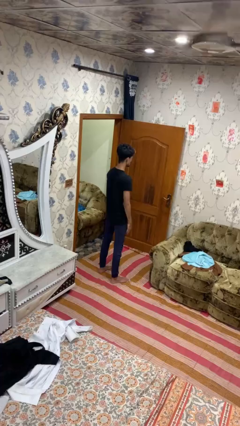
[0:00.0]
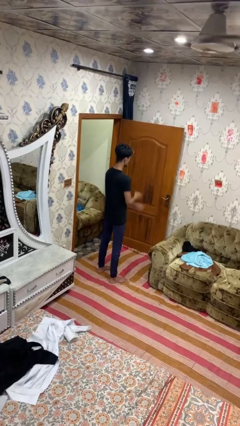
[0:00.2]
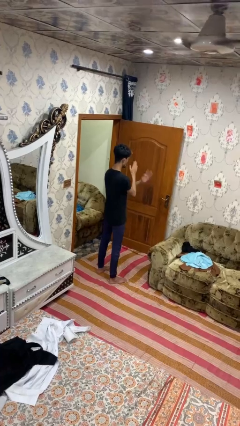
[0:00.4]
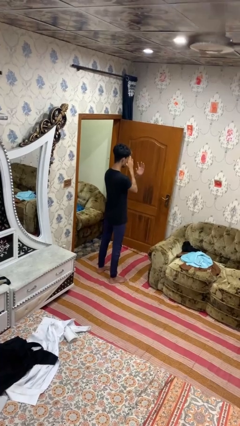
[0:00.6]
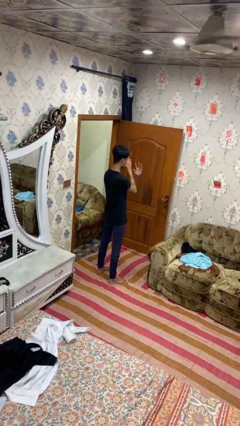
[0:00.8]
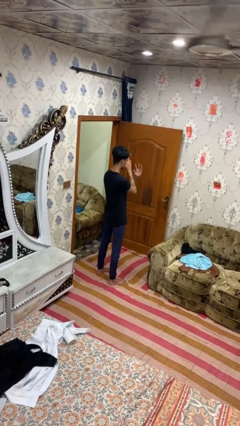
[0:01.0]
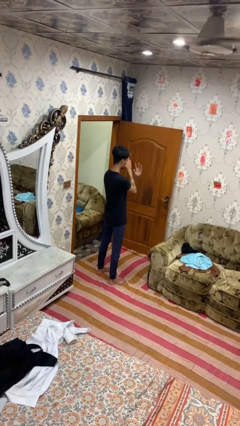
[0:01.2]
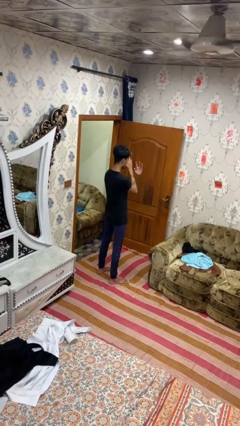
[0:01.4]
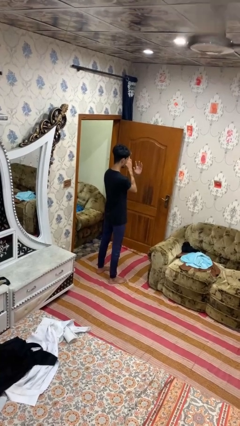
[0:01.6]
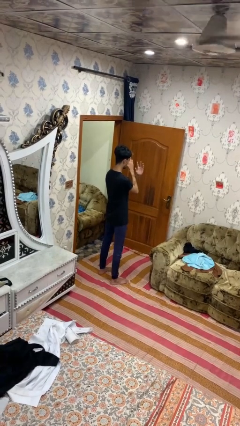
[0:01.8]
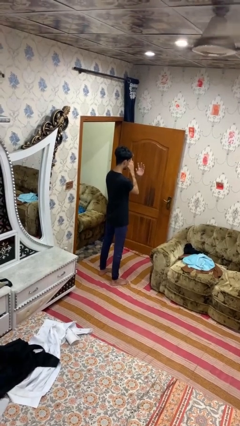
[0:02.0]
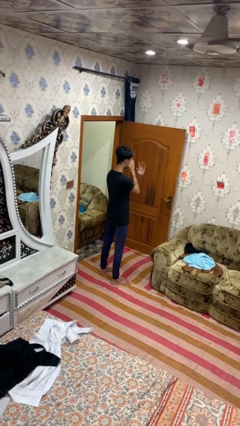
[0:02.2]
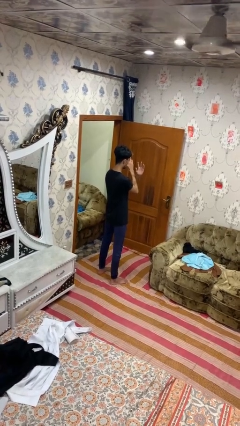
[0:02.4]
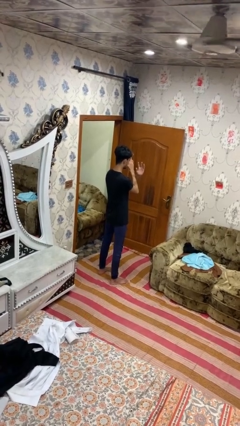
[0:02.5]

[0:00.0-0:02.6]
person gestures arms x

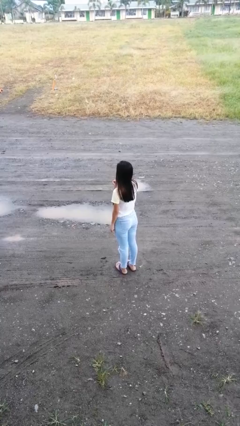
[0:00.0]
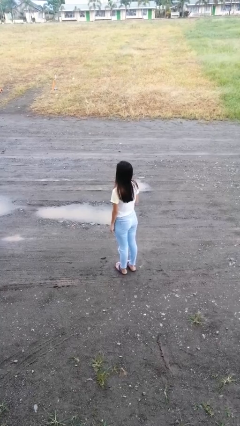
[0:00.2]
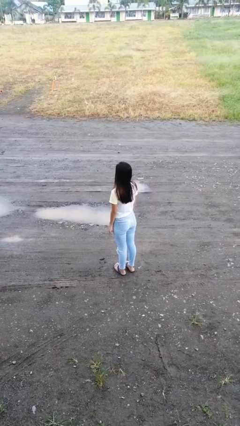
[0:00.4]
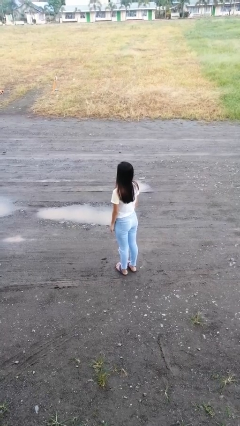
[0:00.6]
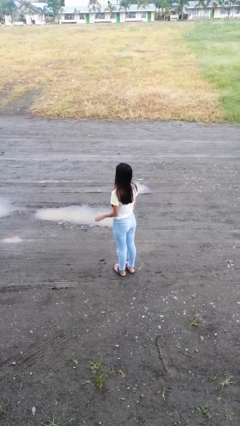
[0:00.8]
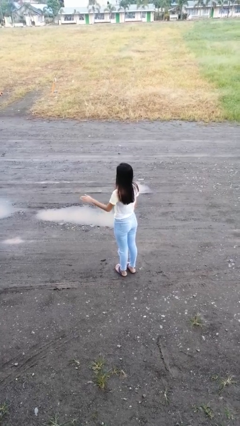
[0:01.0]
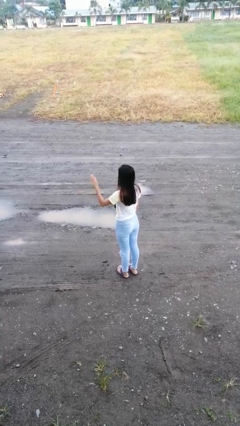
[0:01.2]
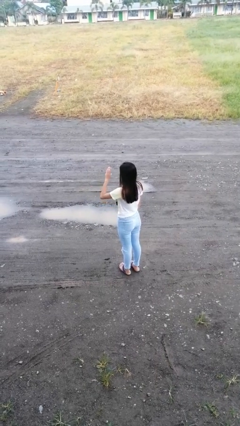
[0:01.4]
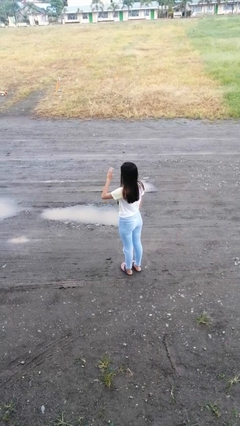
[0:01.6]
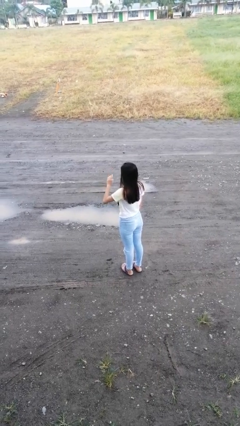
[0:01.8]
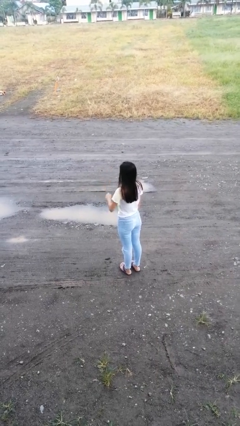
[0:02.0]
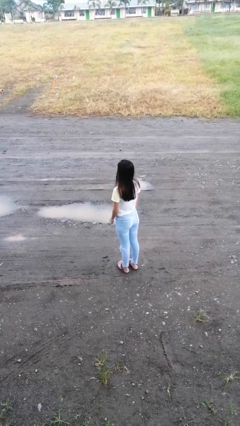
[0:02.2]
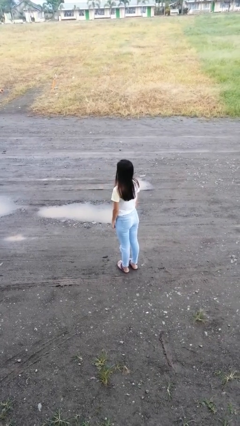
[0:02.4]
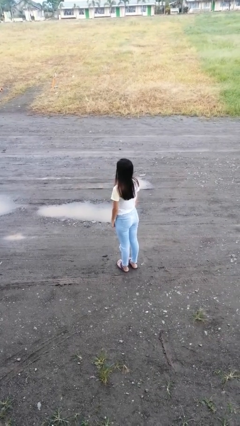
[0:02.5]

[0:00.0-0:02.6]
person gestures swipe right

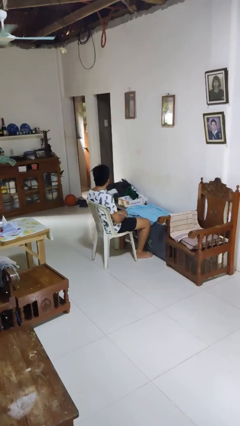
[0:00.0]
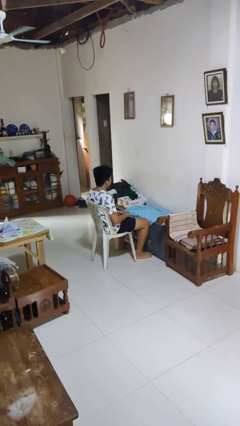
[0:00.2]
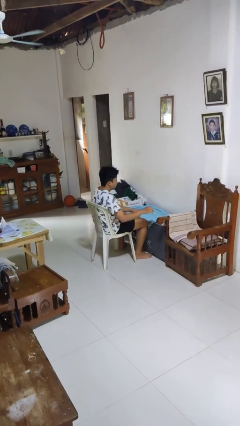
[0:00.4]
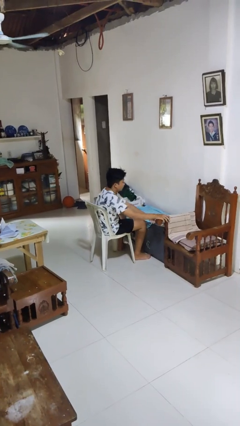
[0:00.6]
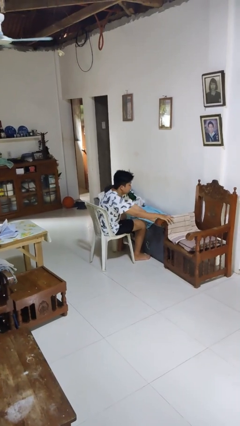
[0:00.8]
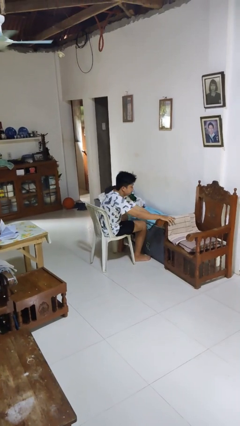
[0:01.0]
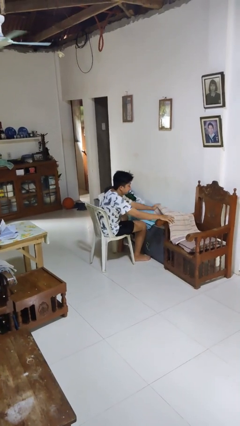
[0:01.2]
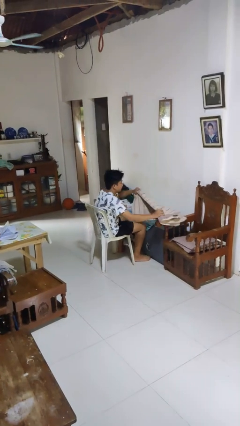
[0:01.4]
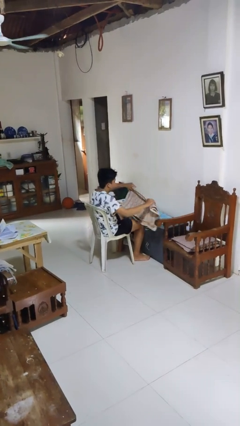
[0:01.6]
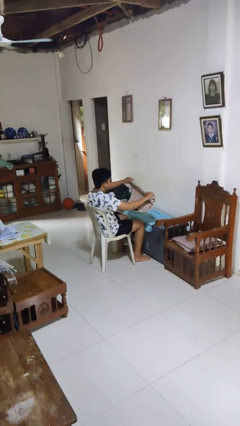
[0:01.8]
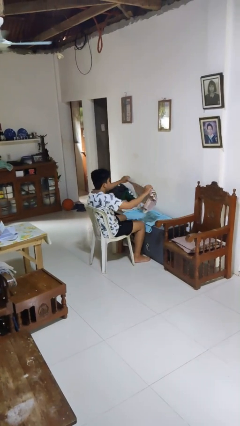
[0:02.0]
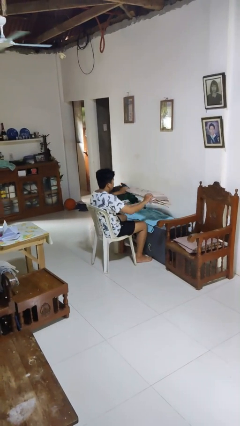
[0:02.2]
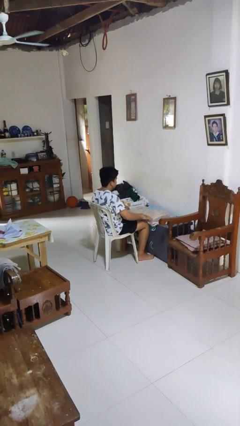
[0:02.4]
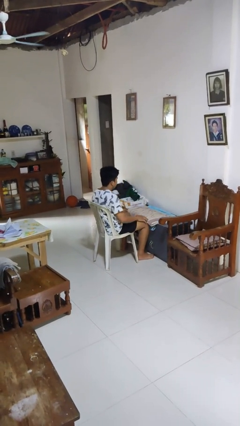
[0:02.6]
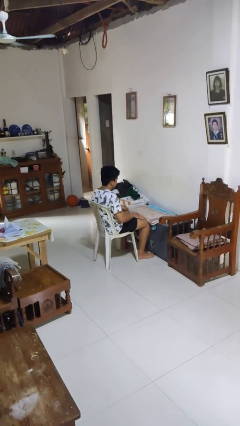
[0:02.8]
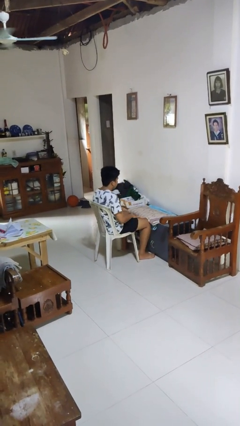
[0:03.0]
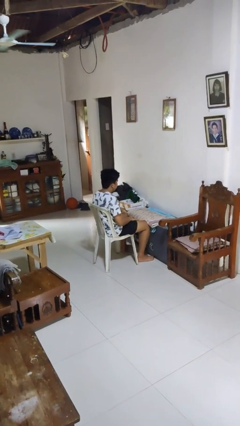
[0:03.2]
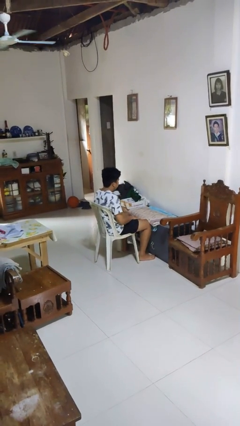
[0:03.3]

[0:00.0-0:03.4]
person folds towel

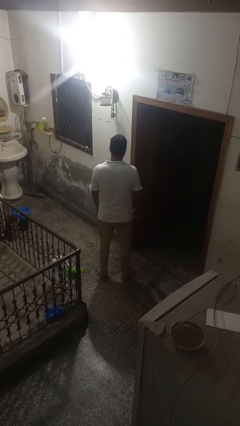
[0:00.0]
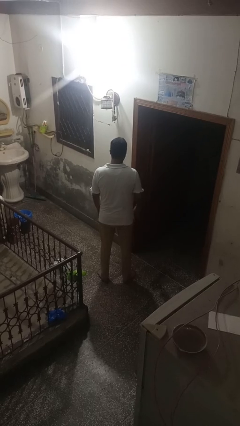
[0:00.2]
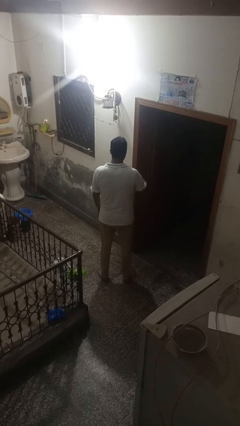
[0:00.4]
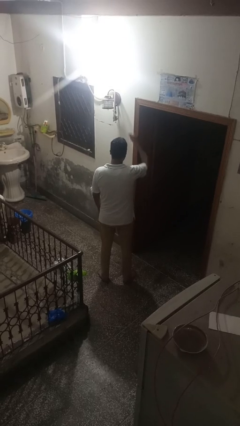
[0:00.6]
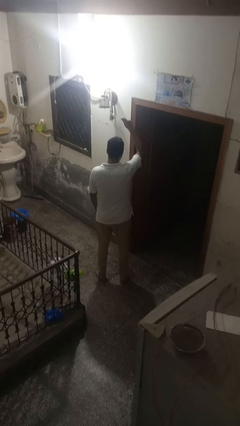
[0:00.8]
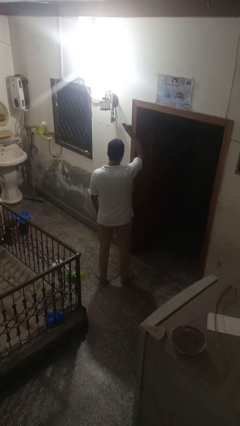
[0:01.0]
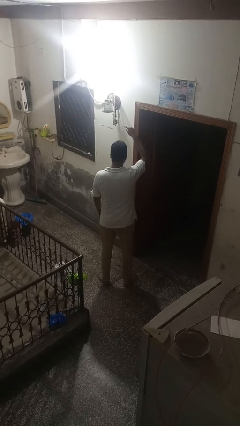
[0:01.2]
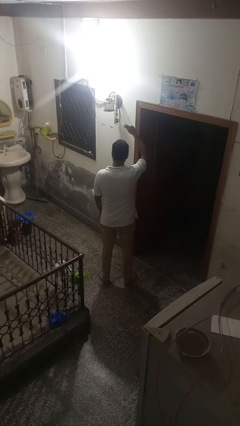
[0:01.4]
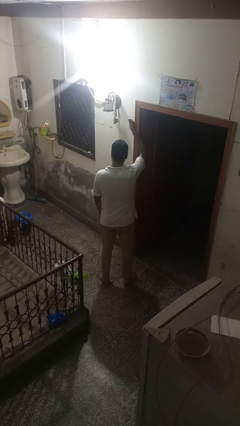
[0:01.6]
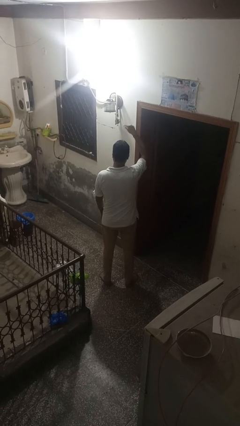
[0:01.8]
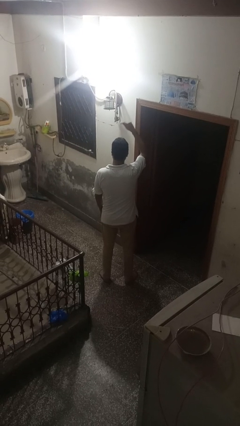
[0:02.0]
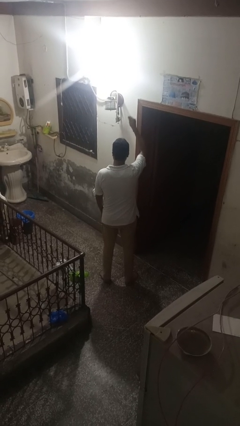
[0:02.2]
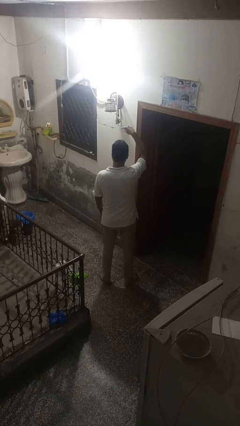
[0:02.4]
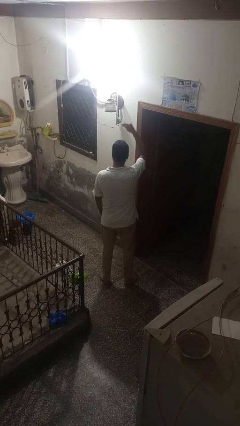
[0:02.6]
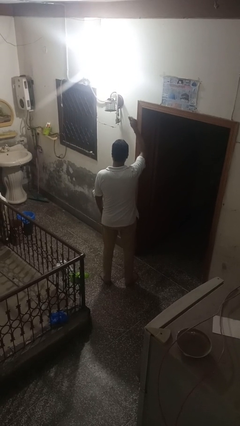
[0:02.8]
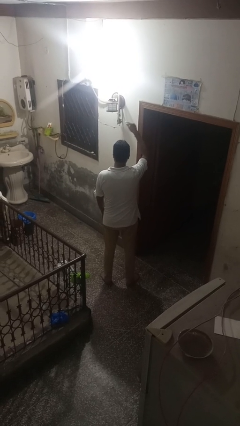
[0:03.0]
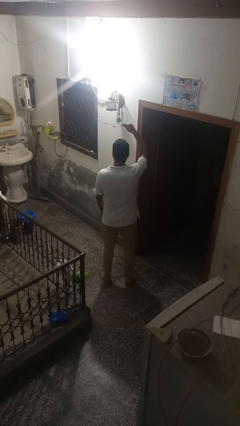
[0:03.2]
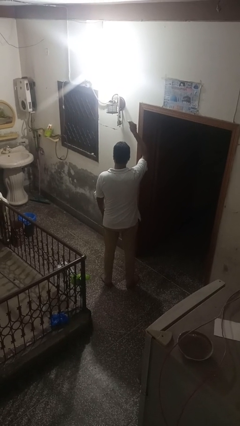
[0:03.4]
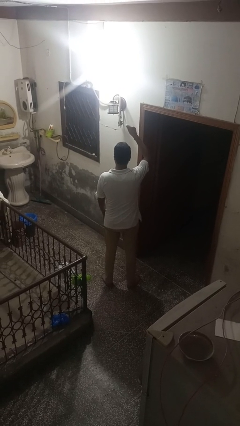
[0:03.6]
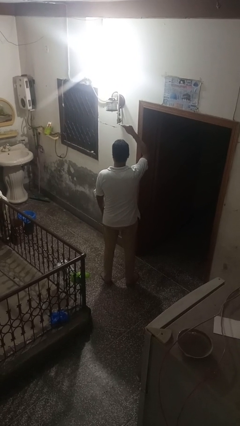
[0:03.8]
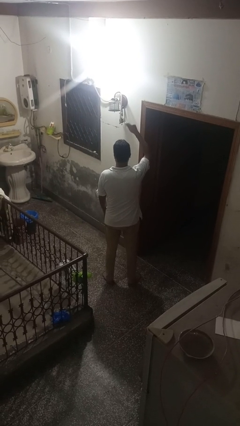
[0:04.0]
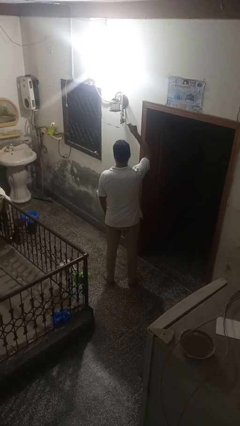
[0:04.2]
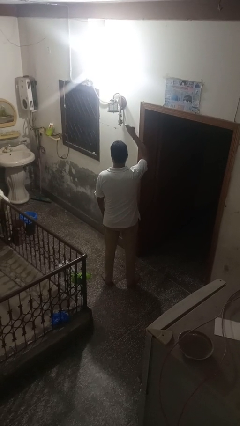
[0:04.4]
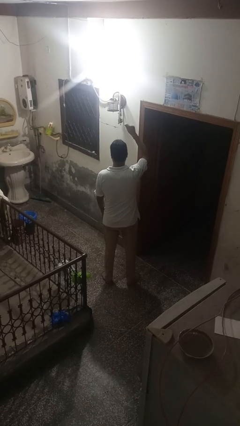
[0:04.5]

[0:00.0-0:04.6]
person snaps fingers

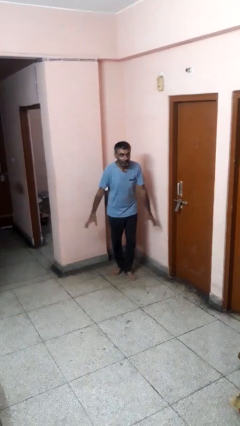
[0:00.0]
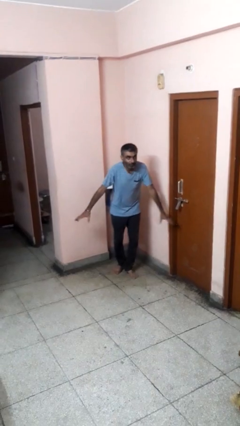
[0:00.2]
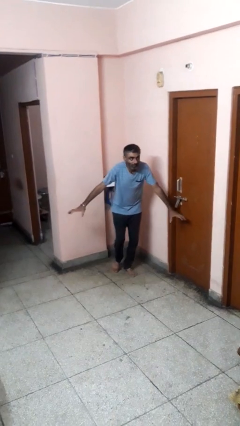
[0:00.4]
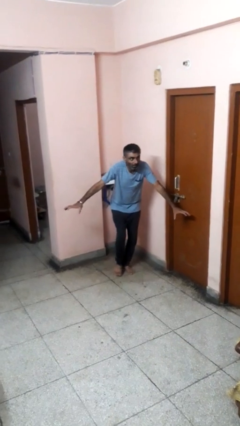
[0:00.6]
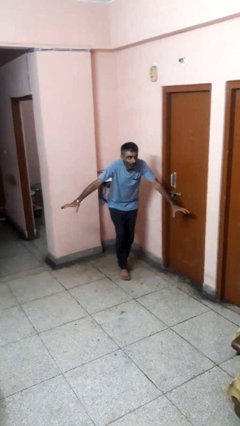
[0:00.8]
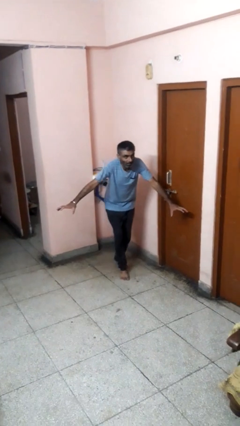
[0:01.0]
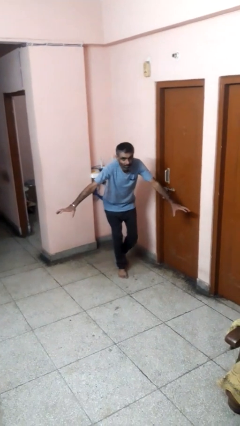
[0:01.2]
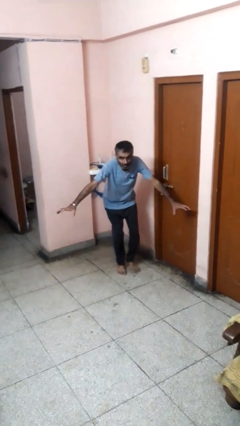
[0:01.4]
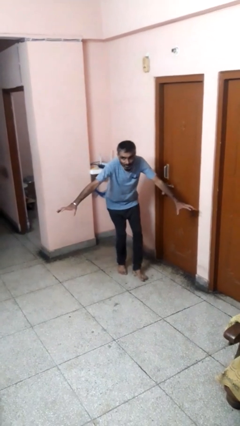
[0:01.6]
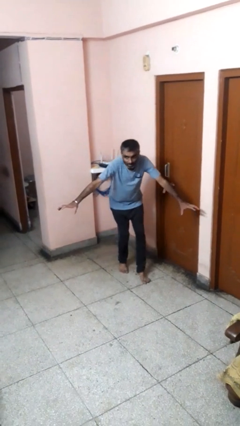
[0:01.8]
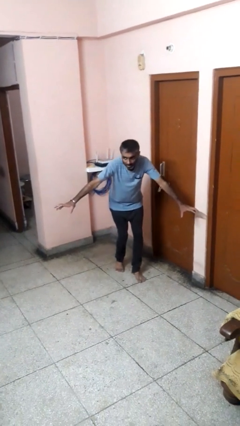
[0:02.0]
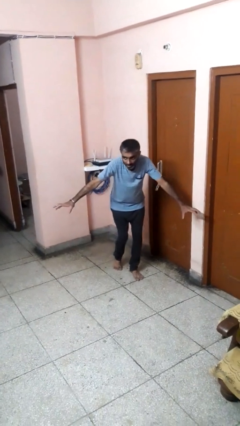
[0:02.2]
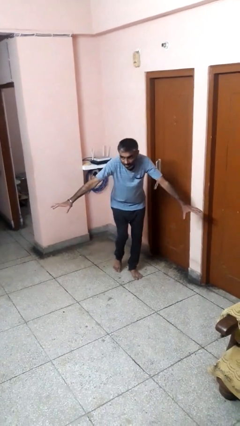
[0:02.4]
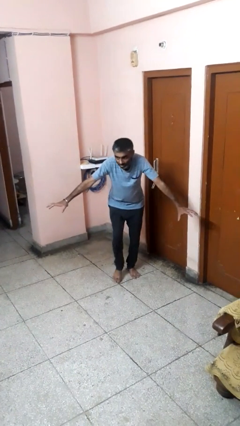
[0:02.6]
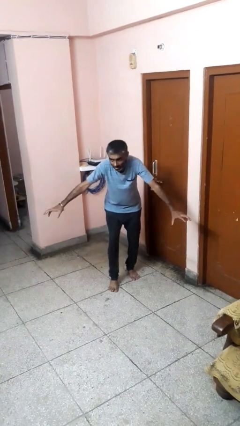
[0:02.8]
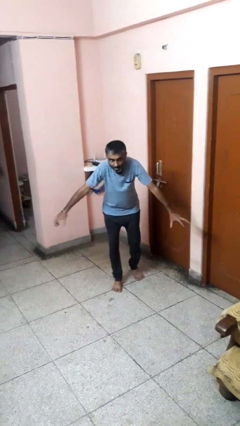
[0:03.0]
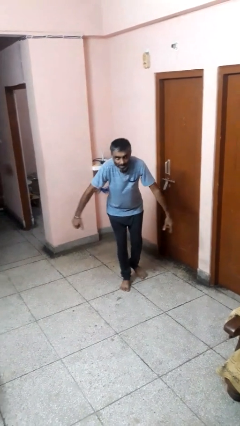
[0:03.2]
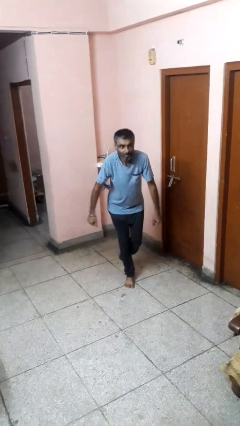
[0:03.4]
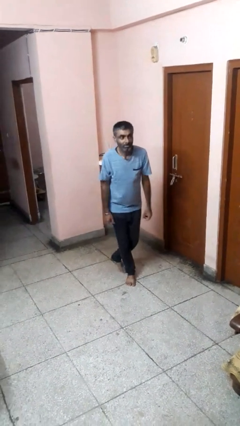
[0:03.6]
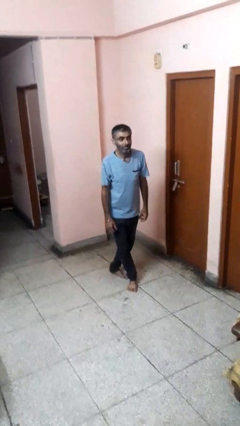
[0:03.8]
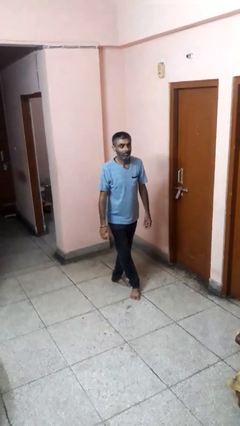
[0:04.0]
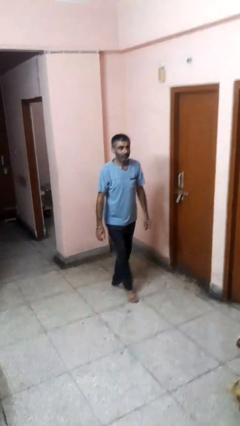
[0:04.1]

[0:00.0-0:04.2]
person walks tiptoe
